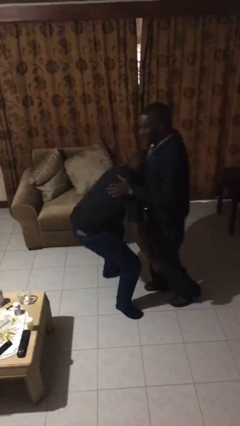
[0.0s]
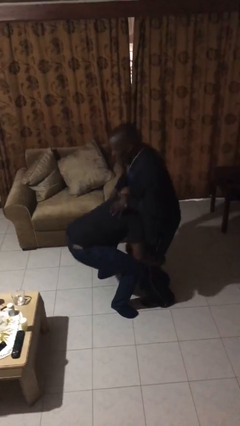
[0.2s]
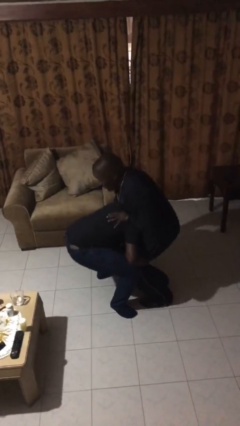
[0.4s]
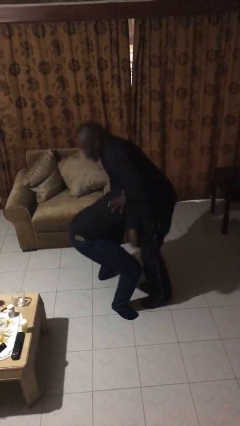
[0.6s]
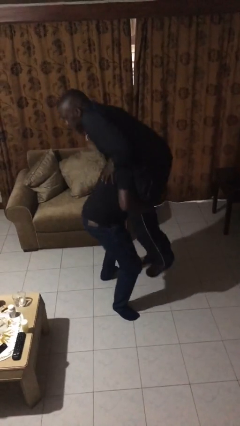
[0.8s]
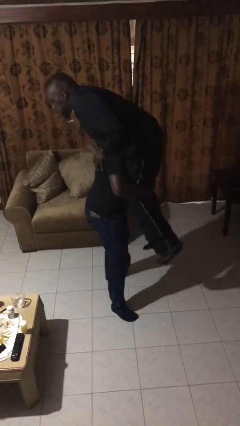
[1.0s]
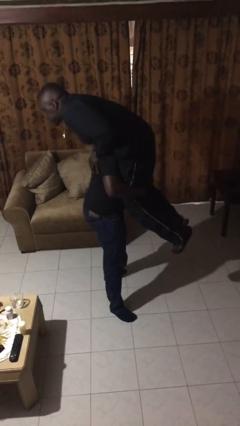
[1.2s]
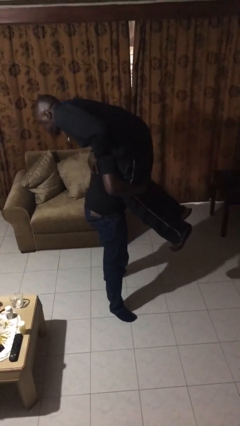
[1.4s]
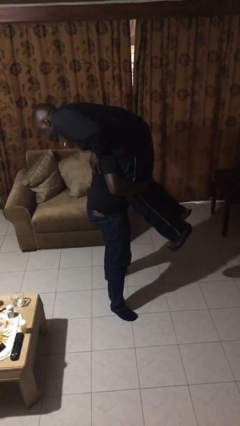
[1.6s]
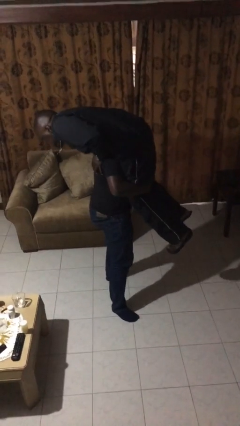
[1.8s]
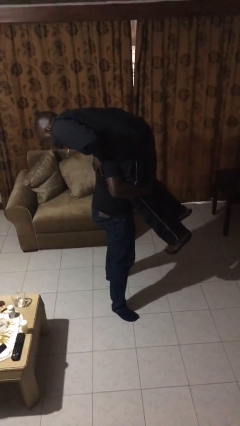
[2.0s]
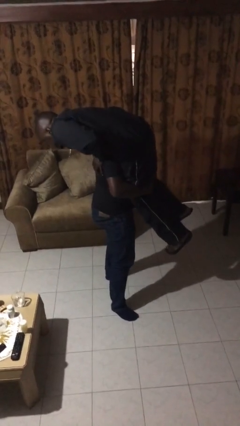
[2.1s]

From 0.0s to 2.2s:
person carries person over shoulder

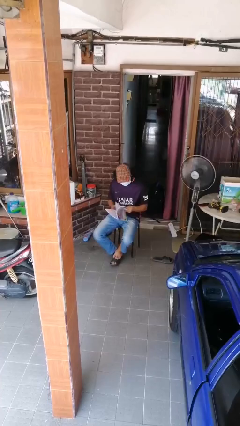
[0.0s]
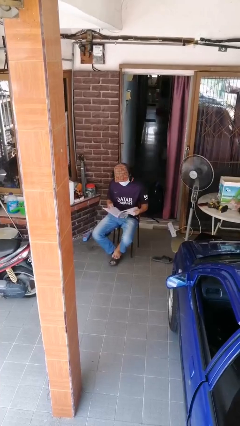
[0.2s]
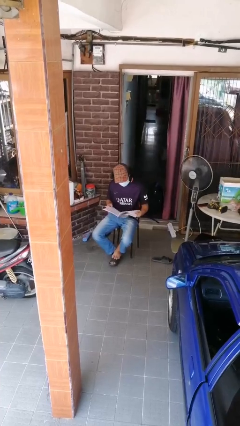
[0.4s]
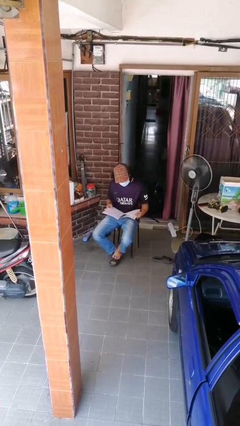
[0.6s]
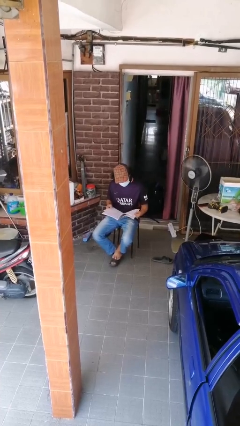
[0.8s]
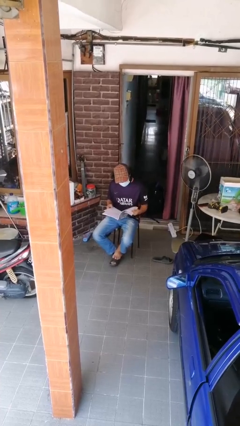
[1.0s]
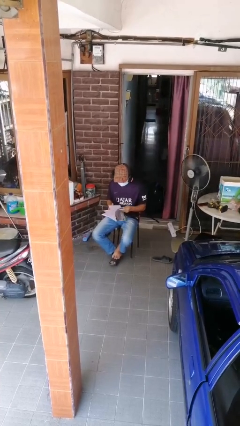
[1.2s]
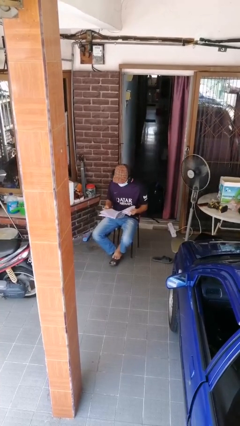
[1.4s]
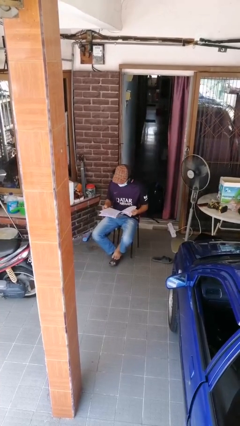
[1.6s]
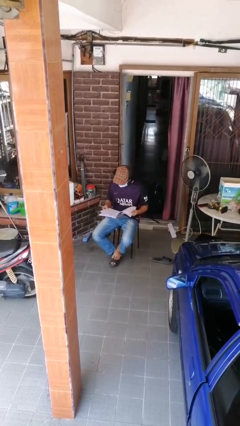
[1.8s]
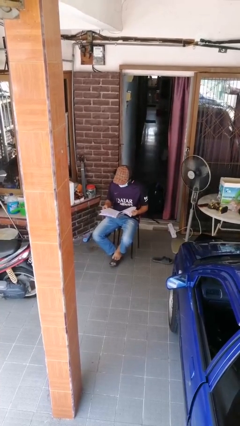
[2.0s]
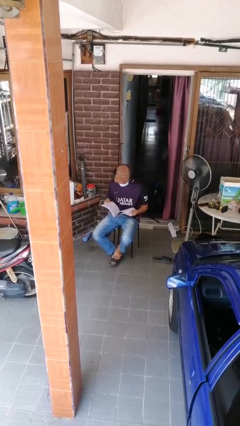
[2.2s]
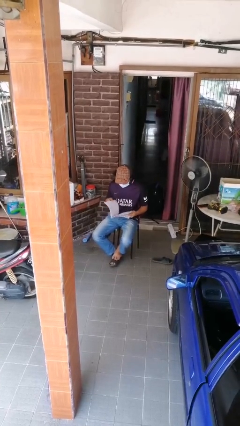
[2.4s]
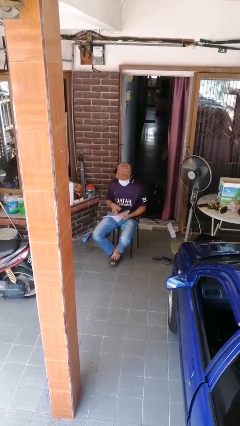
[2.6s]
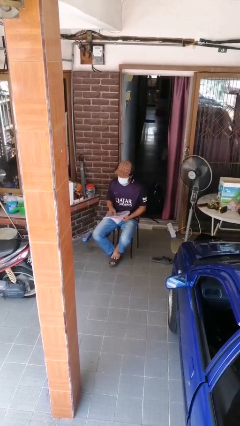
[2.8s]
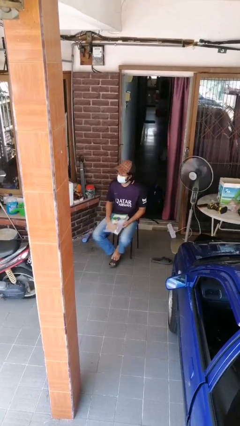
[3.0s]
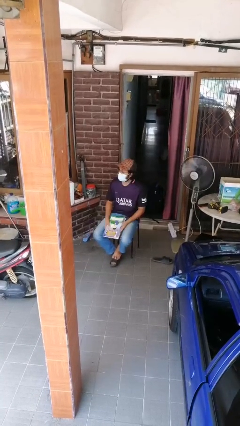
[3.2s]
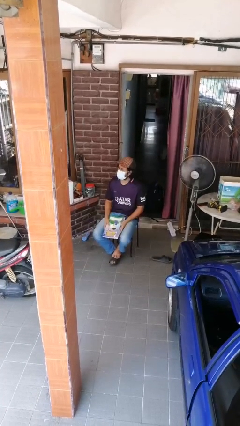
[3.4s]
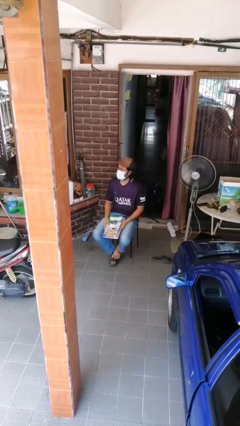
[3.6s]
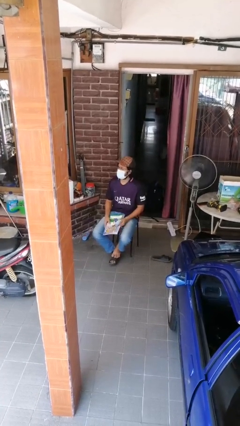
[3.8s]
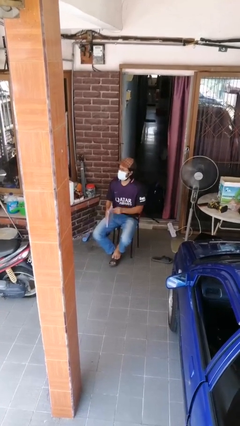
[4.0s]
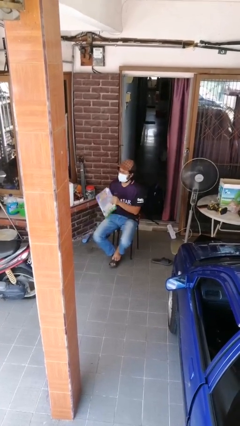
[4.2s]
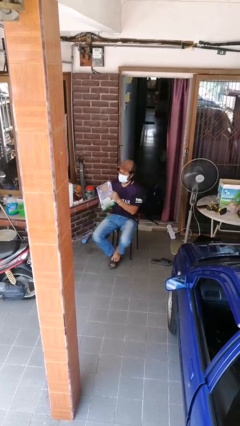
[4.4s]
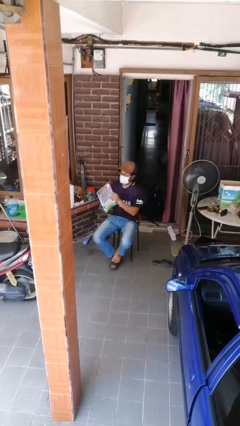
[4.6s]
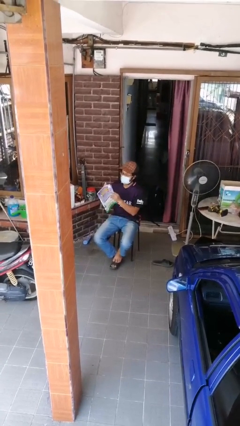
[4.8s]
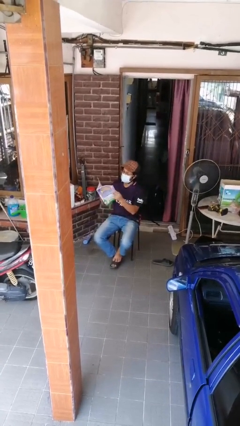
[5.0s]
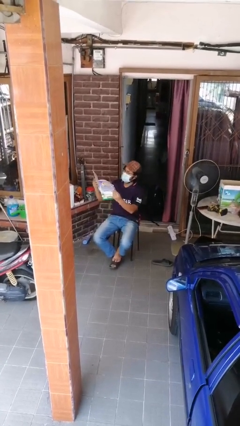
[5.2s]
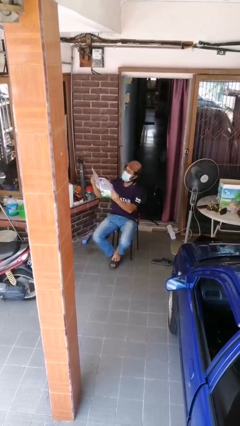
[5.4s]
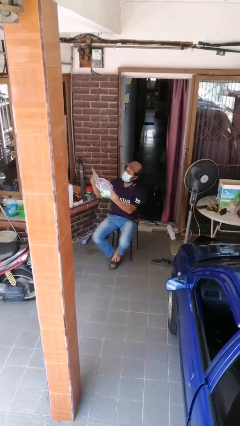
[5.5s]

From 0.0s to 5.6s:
person reads document

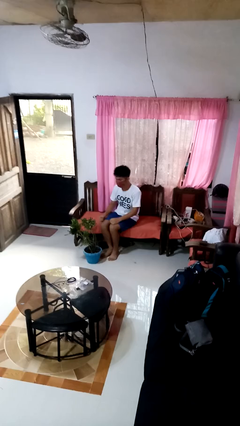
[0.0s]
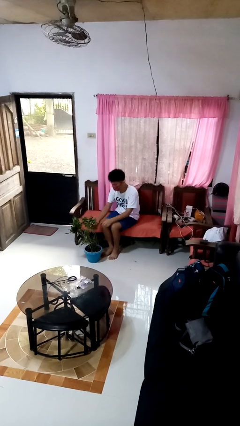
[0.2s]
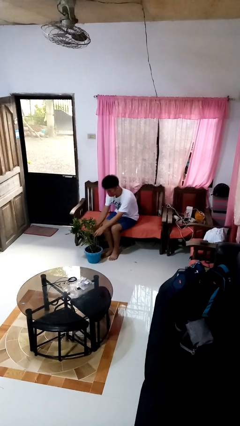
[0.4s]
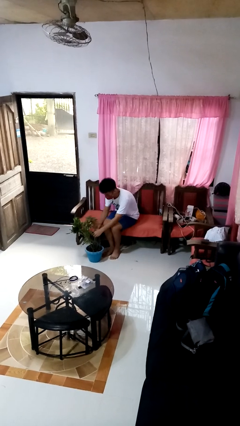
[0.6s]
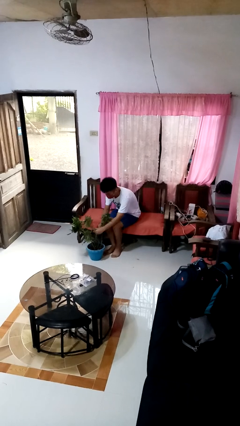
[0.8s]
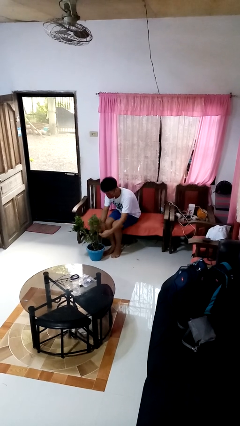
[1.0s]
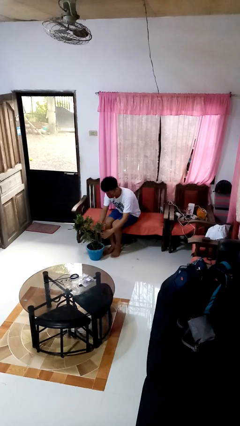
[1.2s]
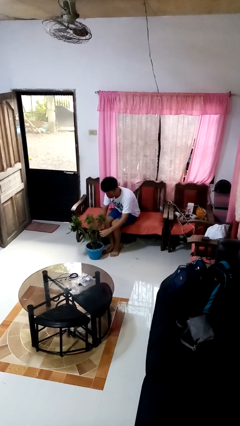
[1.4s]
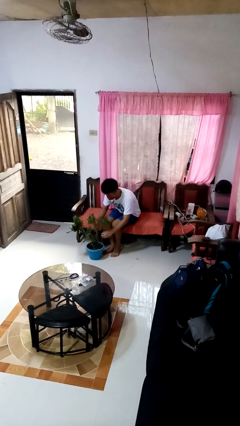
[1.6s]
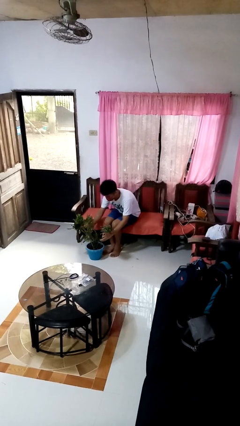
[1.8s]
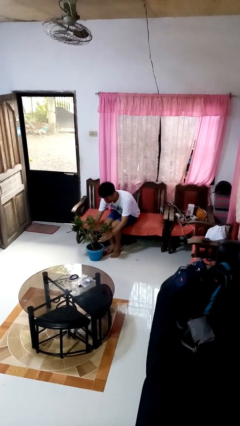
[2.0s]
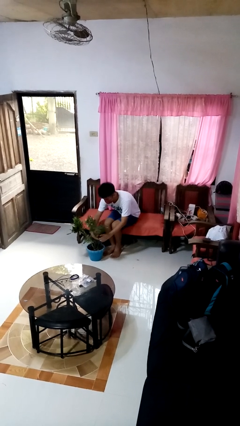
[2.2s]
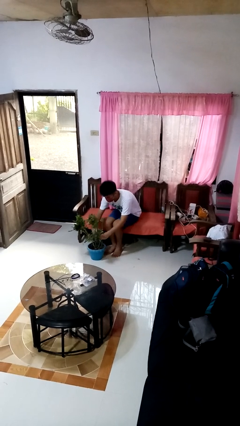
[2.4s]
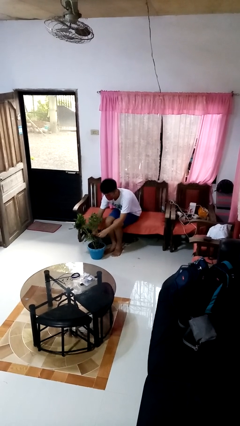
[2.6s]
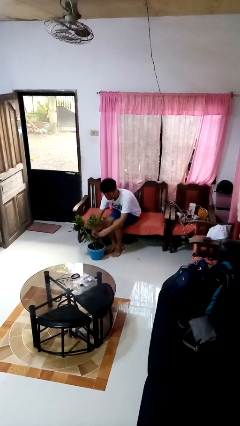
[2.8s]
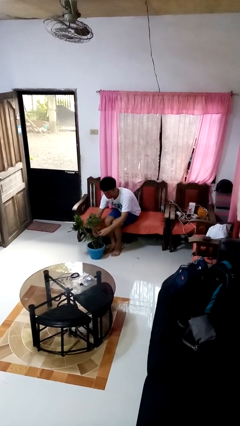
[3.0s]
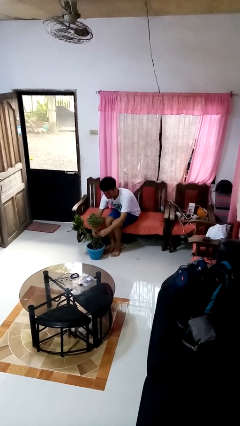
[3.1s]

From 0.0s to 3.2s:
person arranges flowers in vase

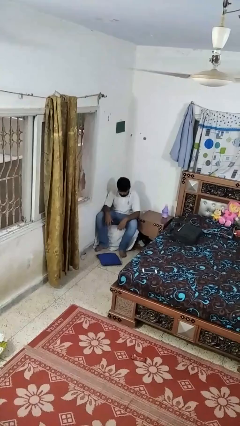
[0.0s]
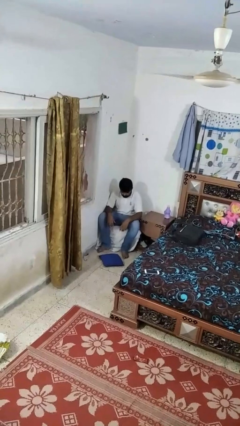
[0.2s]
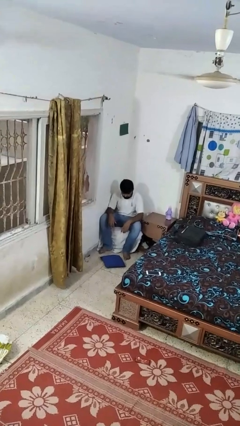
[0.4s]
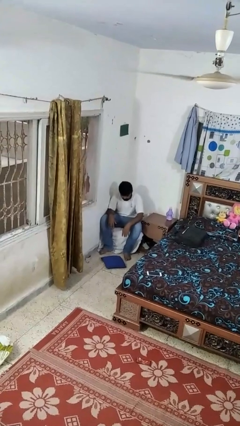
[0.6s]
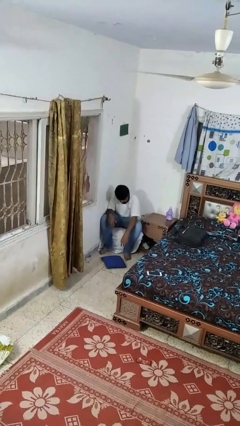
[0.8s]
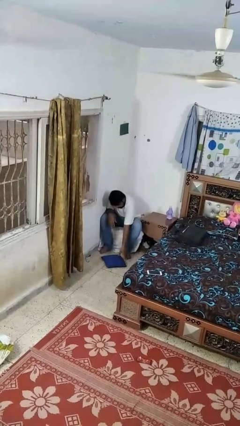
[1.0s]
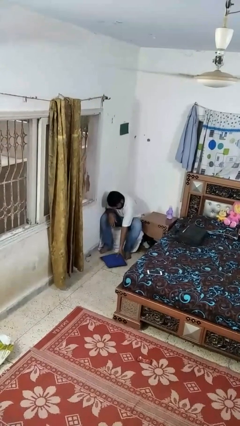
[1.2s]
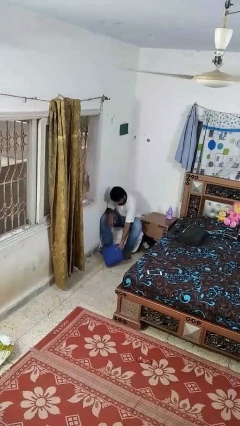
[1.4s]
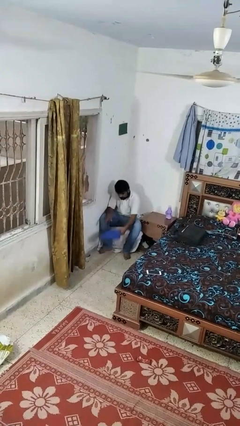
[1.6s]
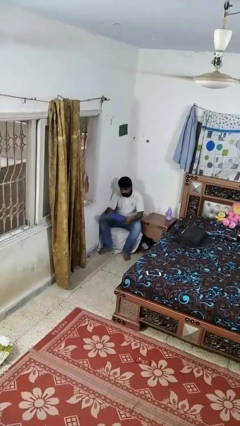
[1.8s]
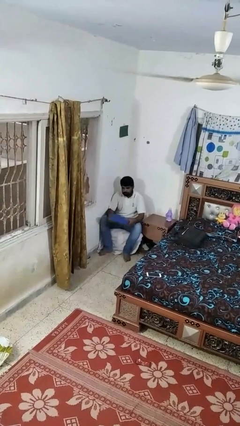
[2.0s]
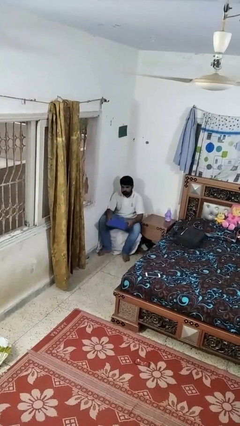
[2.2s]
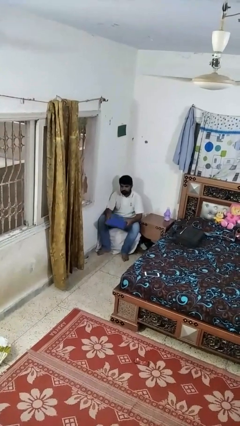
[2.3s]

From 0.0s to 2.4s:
person picks up object from floor

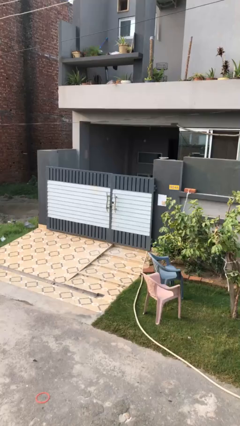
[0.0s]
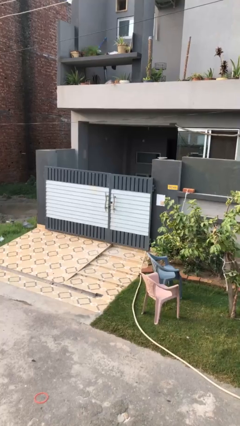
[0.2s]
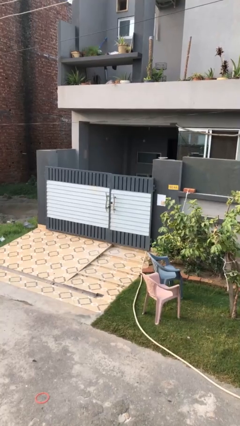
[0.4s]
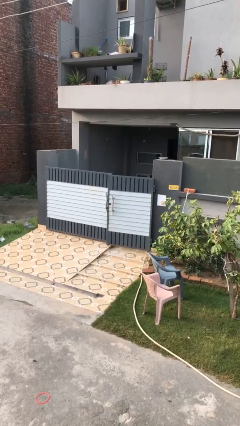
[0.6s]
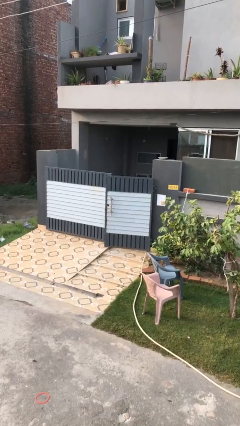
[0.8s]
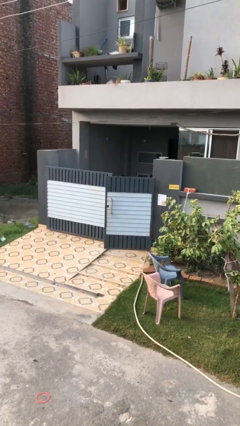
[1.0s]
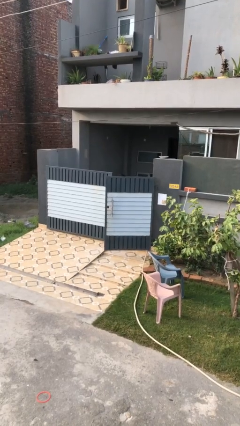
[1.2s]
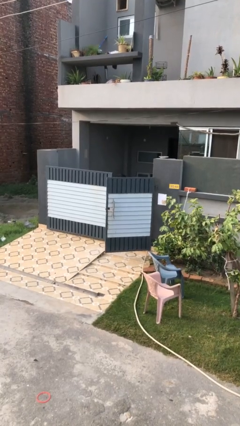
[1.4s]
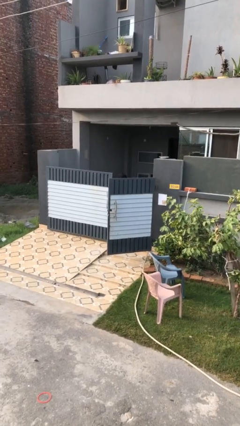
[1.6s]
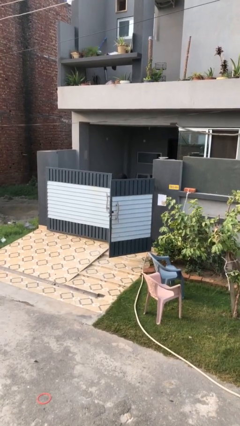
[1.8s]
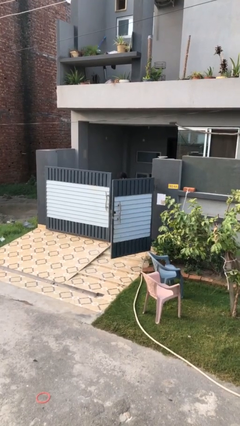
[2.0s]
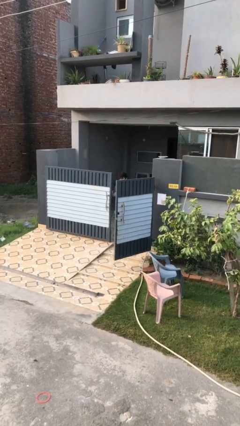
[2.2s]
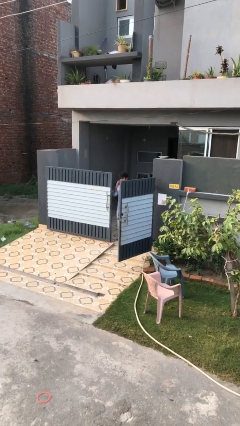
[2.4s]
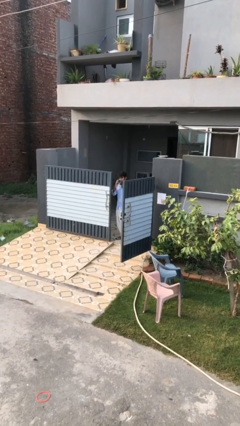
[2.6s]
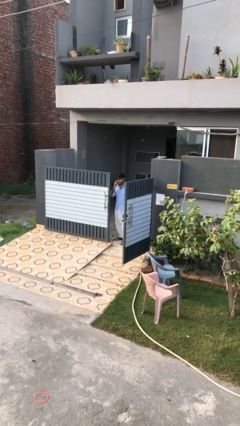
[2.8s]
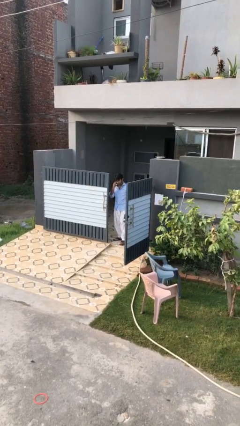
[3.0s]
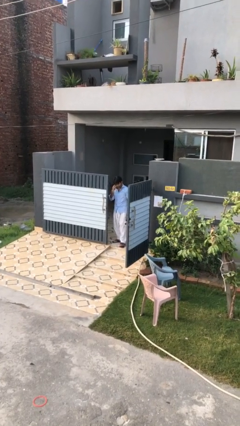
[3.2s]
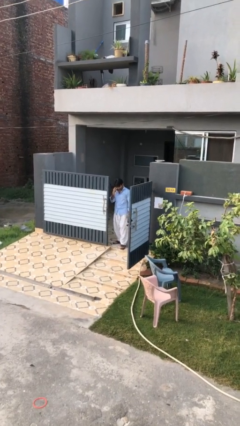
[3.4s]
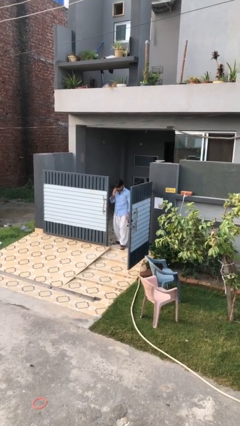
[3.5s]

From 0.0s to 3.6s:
person opens facility door

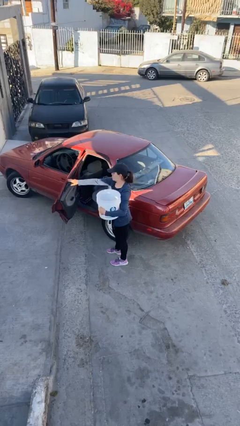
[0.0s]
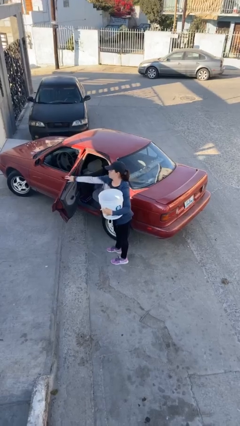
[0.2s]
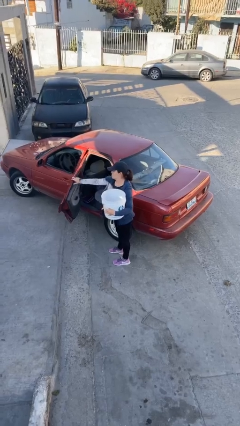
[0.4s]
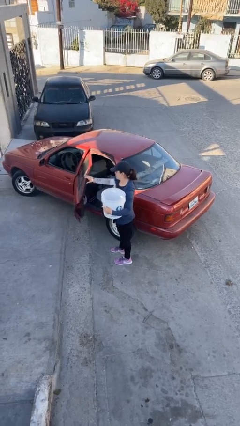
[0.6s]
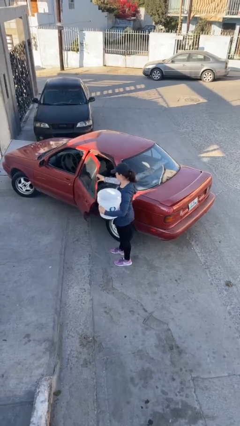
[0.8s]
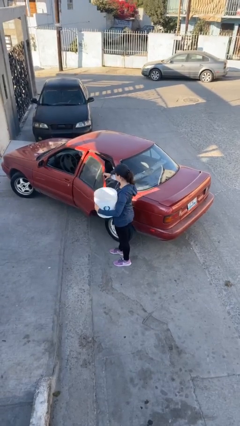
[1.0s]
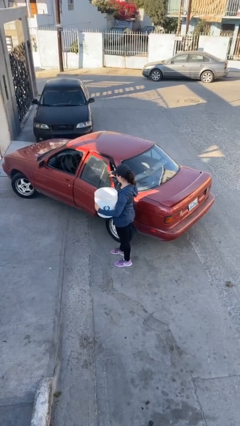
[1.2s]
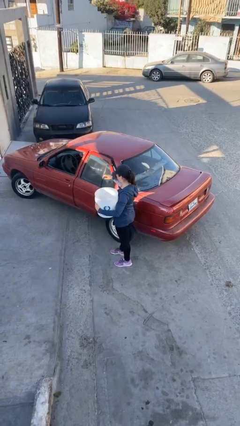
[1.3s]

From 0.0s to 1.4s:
person closes car door
